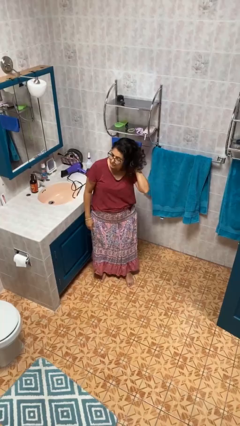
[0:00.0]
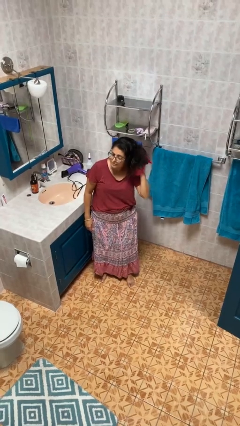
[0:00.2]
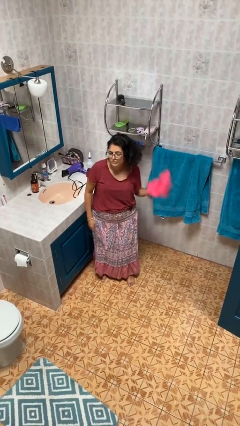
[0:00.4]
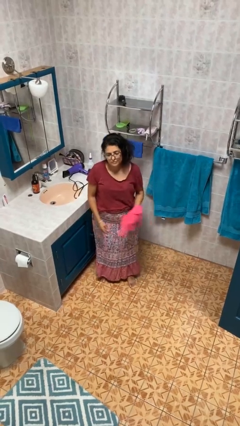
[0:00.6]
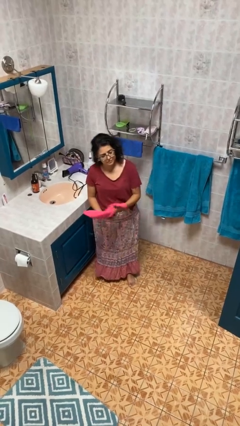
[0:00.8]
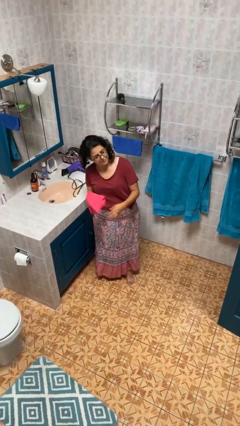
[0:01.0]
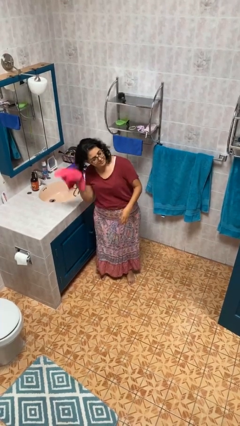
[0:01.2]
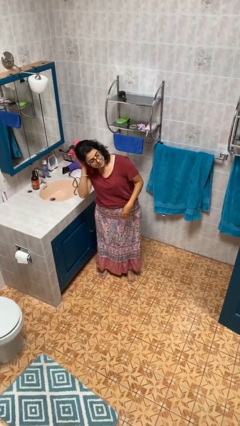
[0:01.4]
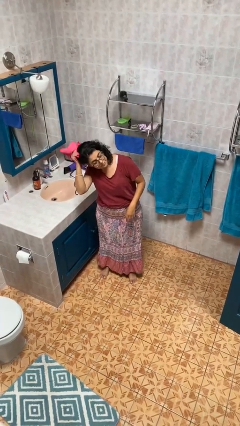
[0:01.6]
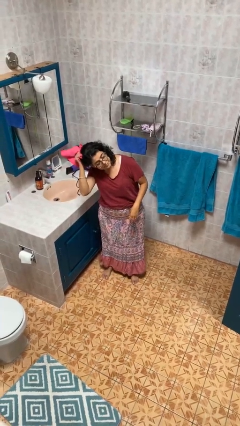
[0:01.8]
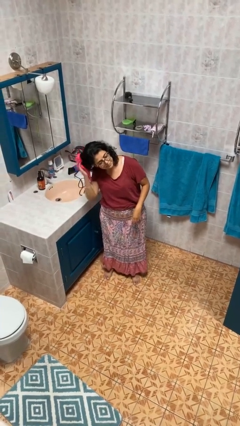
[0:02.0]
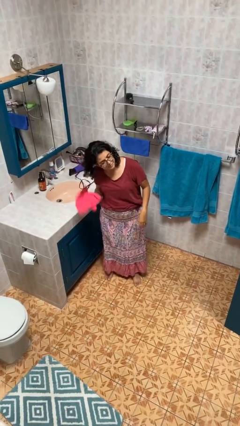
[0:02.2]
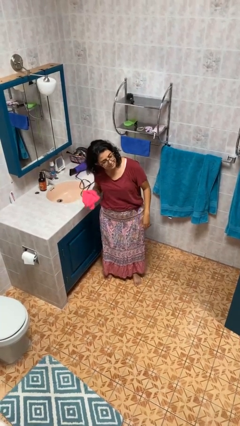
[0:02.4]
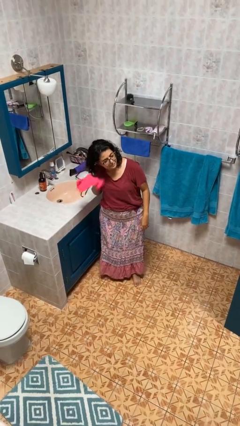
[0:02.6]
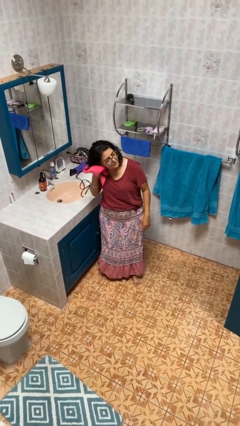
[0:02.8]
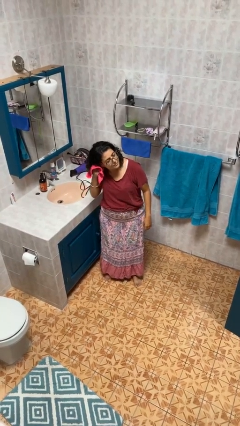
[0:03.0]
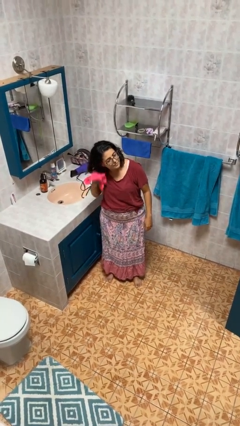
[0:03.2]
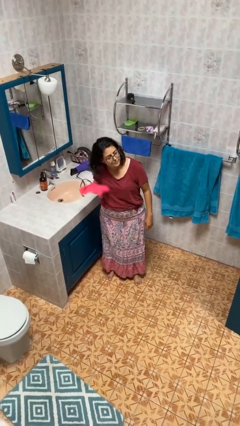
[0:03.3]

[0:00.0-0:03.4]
person dries hair with towel

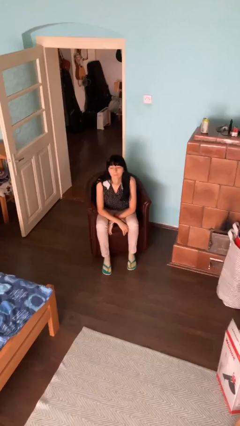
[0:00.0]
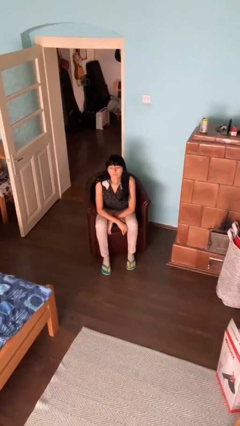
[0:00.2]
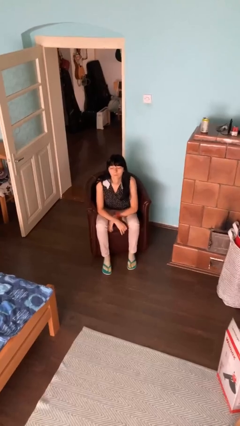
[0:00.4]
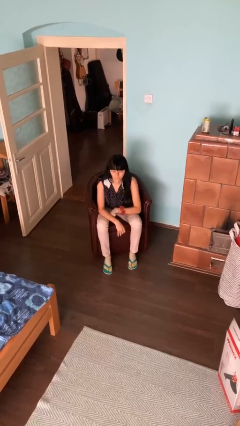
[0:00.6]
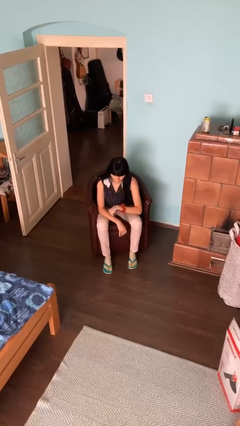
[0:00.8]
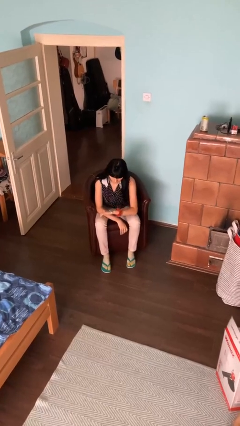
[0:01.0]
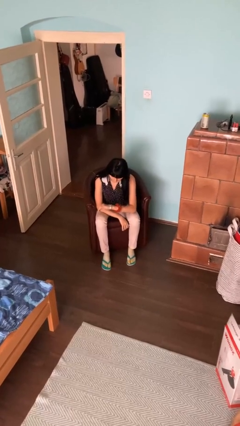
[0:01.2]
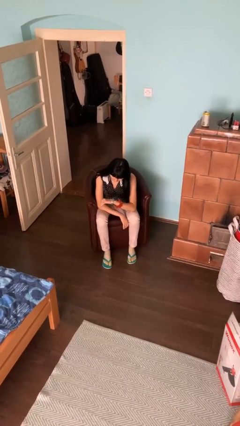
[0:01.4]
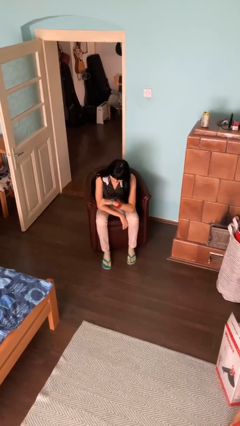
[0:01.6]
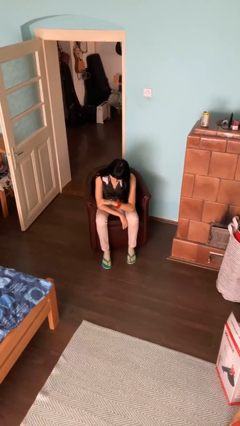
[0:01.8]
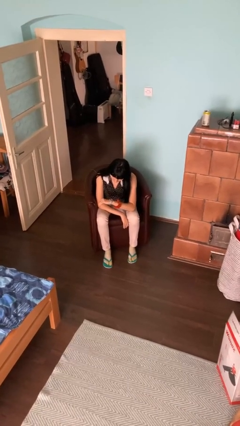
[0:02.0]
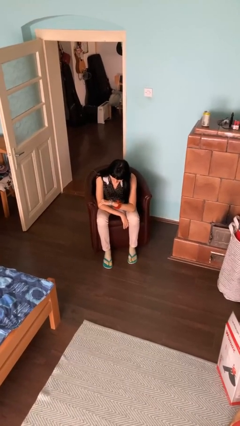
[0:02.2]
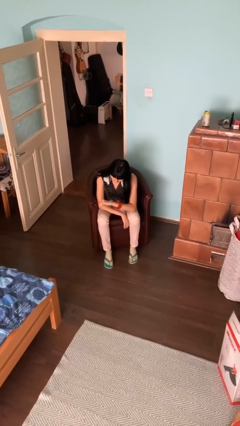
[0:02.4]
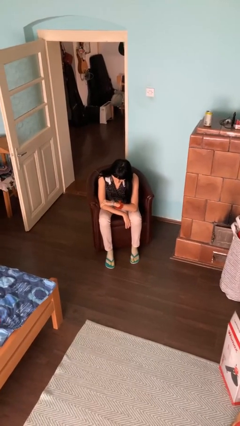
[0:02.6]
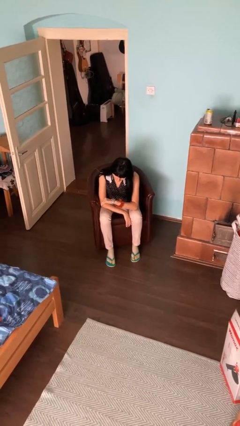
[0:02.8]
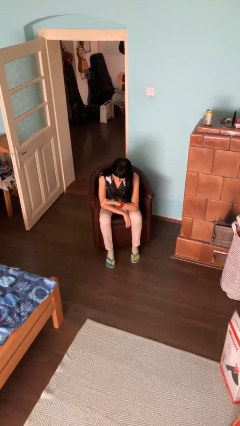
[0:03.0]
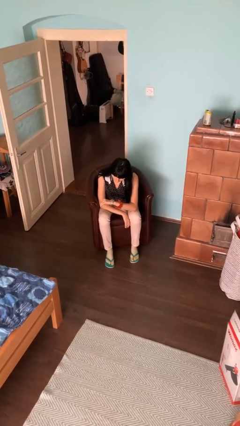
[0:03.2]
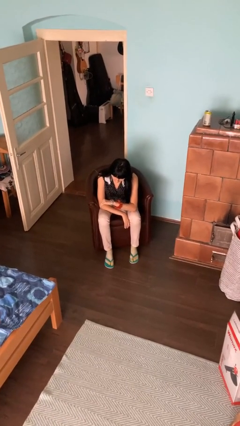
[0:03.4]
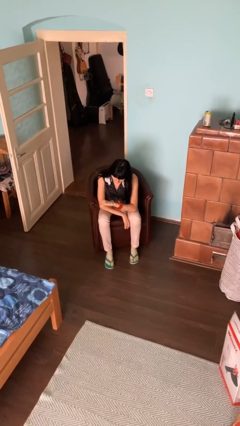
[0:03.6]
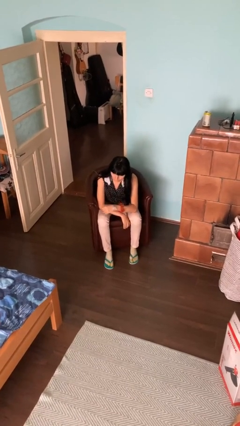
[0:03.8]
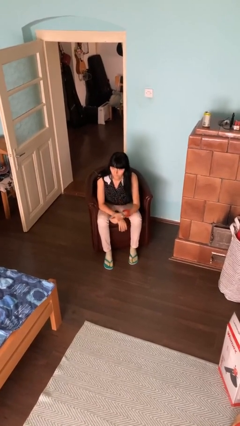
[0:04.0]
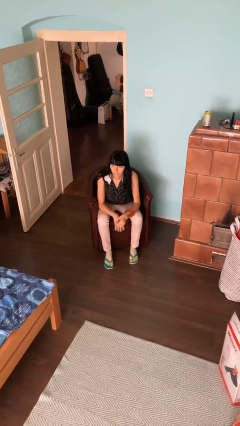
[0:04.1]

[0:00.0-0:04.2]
person looks at wristwatch

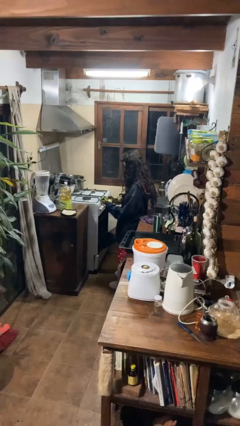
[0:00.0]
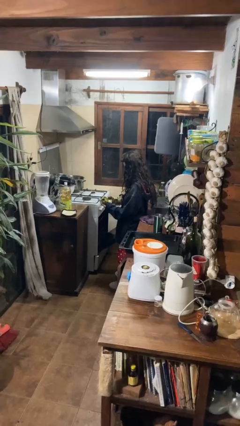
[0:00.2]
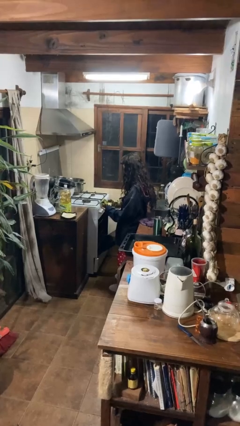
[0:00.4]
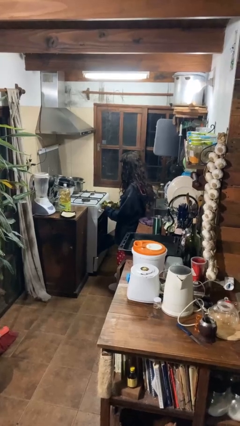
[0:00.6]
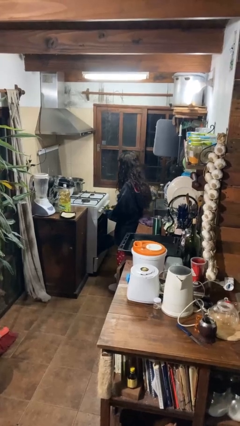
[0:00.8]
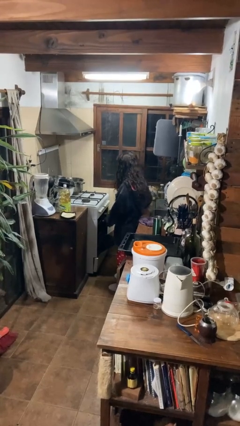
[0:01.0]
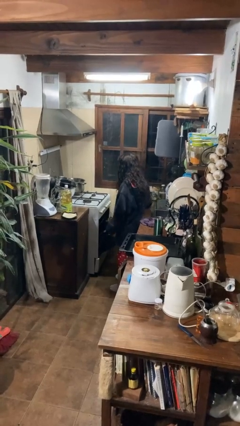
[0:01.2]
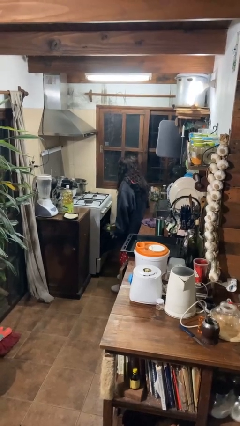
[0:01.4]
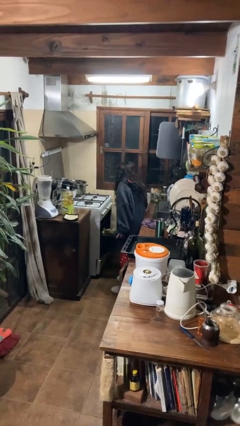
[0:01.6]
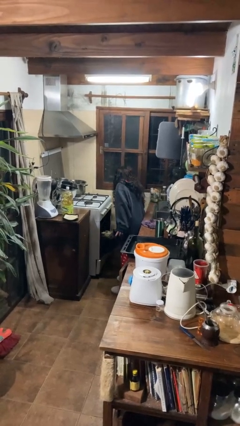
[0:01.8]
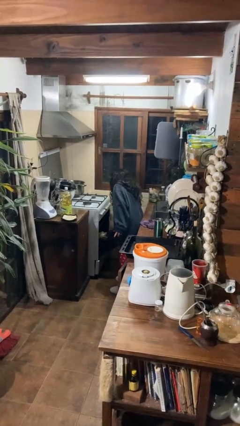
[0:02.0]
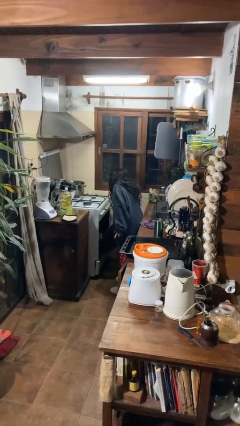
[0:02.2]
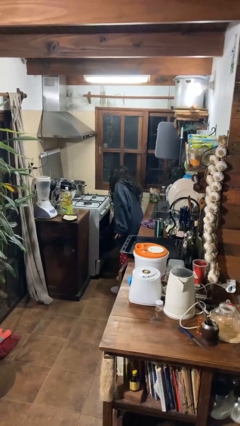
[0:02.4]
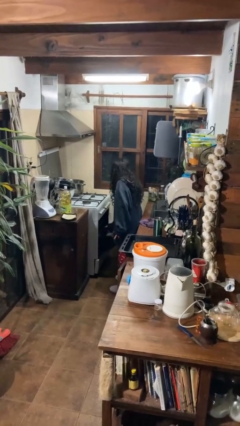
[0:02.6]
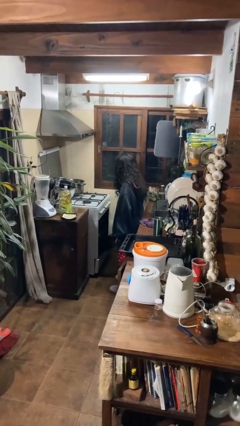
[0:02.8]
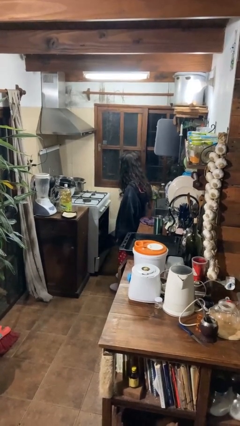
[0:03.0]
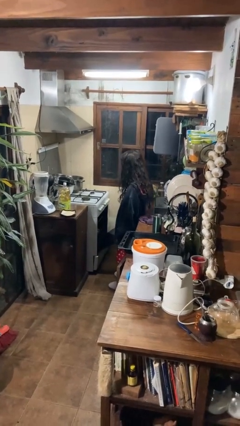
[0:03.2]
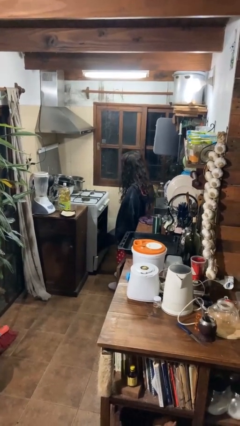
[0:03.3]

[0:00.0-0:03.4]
person puts object into oven

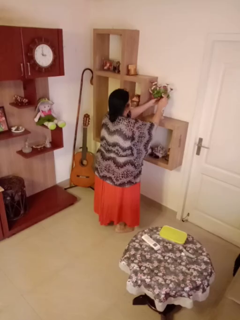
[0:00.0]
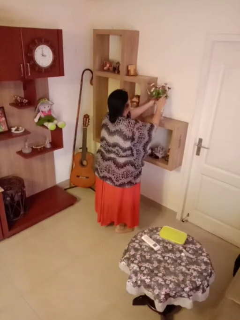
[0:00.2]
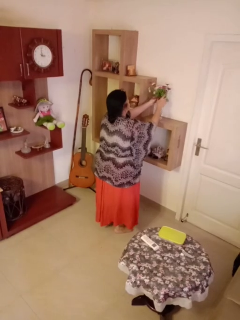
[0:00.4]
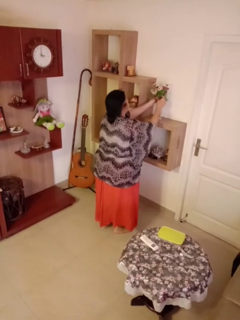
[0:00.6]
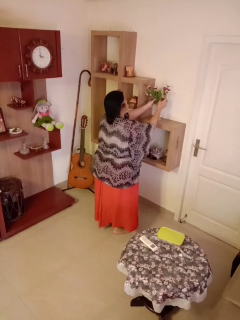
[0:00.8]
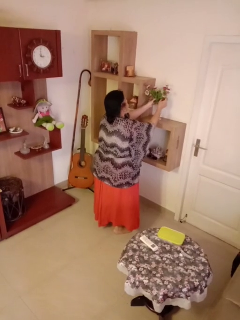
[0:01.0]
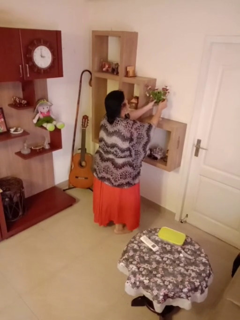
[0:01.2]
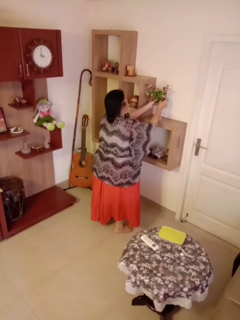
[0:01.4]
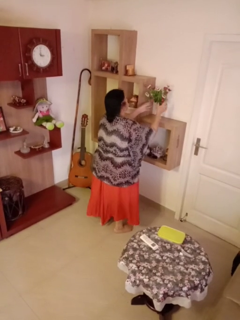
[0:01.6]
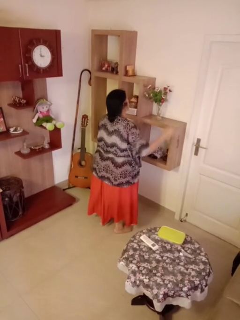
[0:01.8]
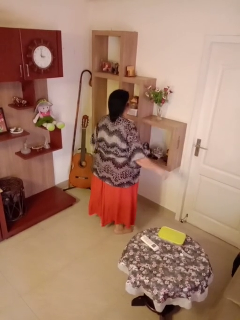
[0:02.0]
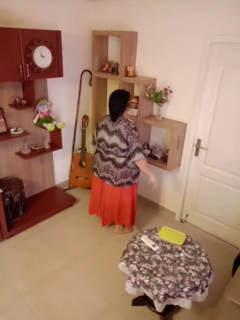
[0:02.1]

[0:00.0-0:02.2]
person arranges flowers in vase

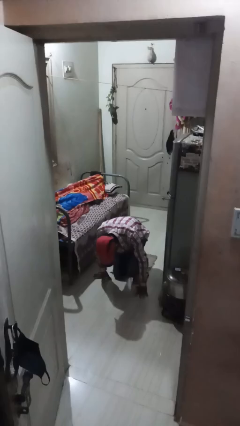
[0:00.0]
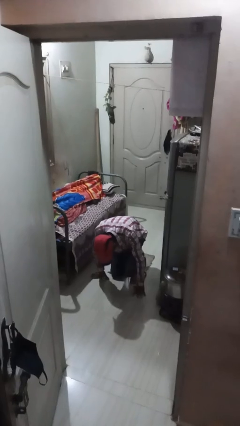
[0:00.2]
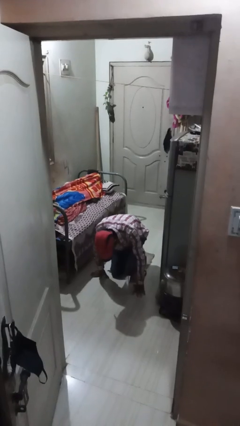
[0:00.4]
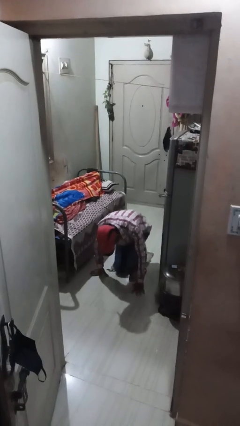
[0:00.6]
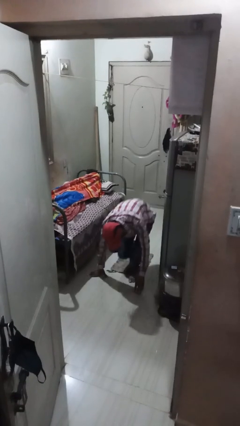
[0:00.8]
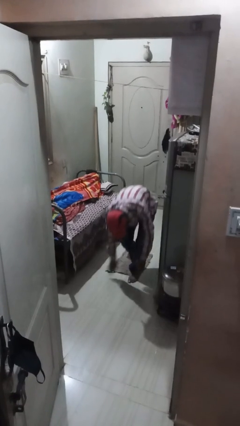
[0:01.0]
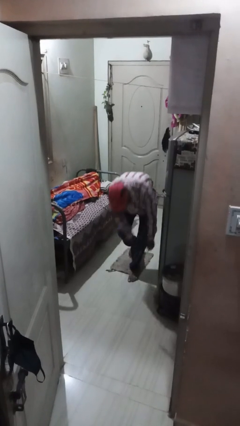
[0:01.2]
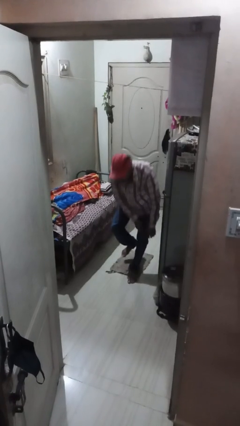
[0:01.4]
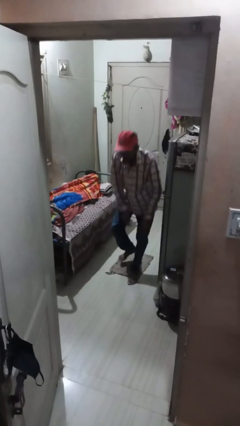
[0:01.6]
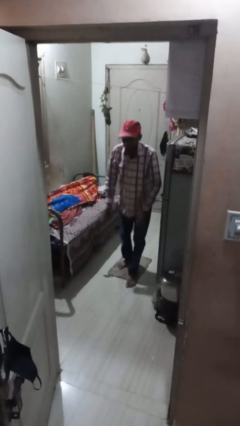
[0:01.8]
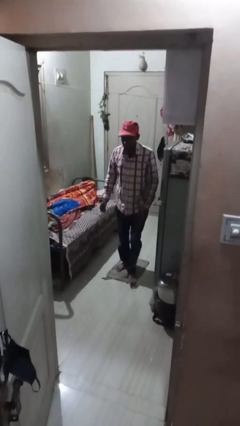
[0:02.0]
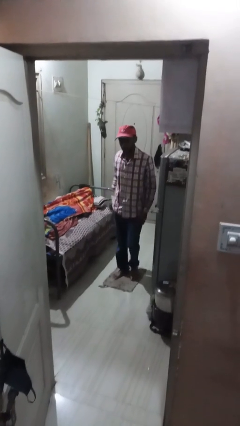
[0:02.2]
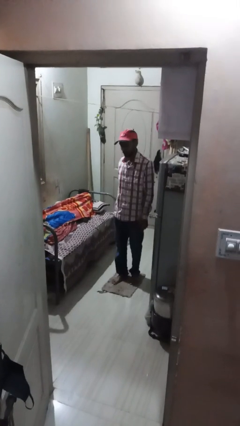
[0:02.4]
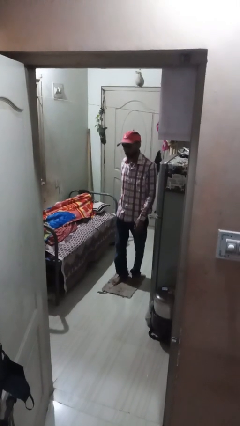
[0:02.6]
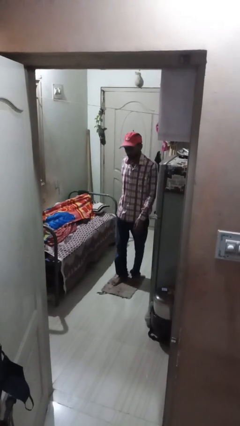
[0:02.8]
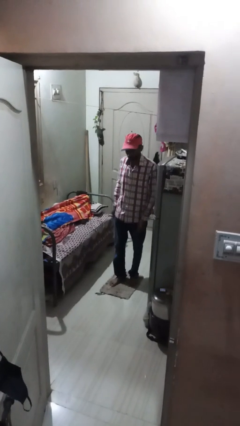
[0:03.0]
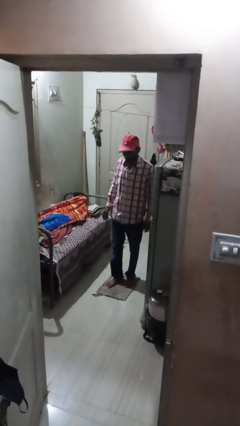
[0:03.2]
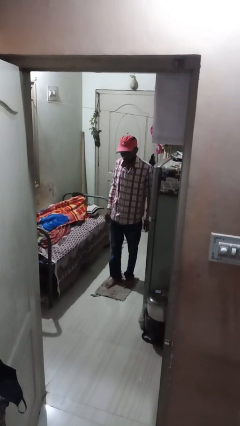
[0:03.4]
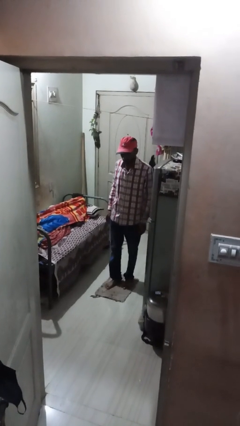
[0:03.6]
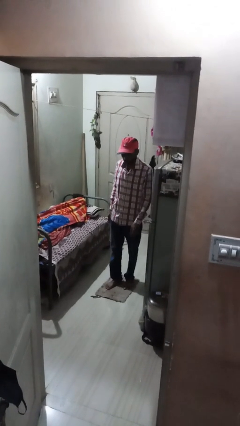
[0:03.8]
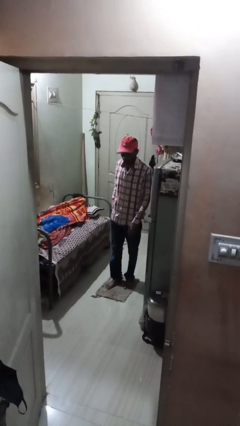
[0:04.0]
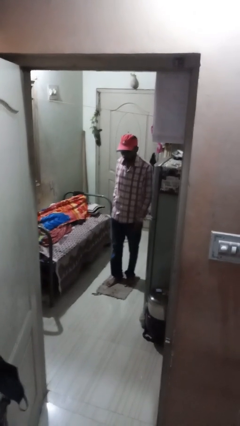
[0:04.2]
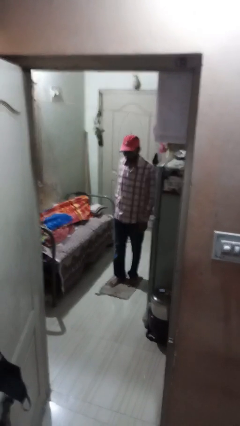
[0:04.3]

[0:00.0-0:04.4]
person stands up from floor

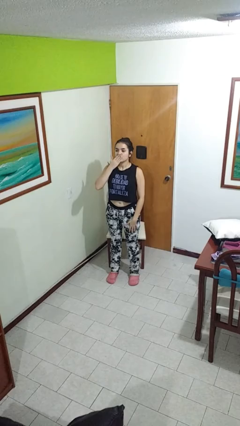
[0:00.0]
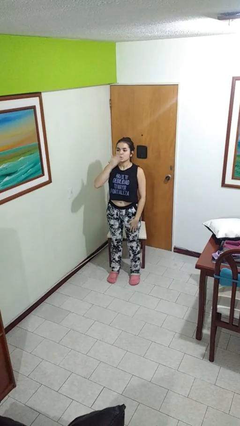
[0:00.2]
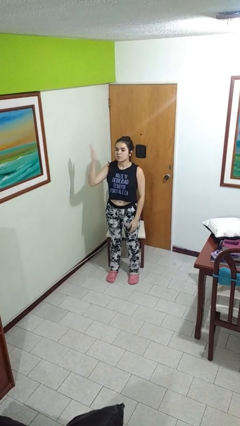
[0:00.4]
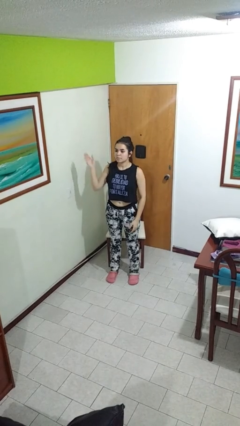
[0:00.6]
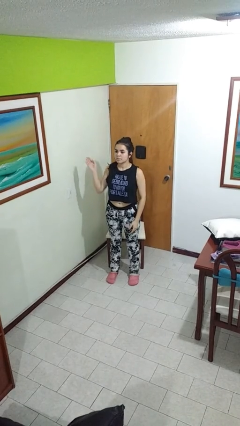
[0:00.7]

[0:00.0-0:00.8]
person gestures blow kiss
